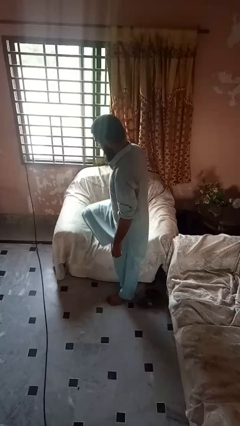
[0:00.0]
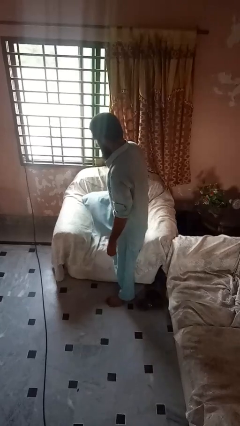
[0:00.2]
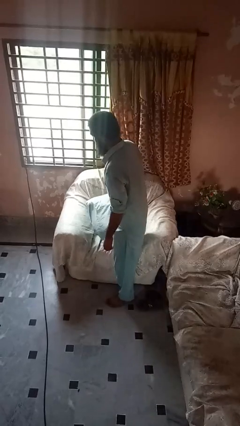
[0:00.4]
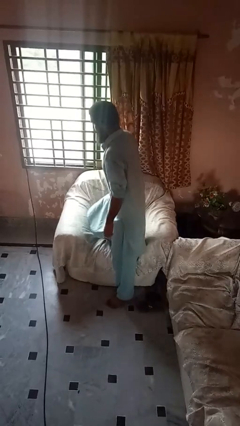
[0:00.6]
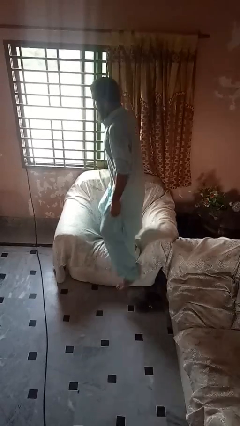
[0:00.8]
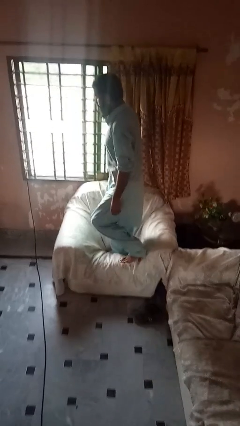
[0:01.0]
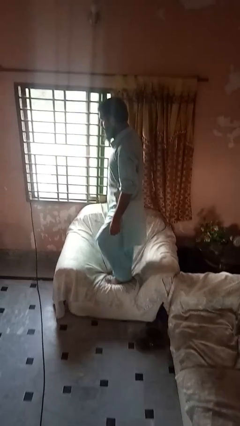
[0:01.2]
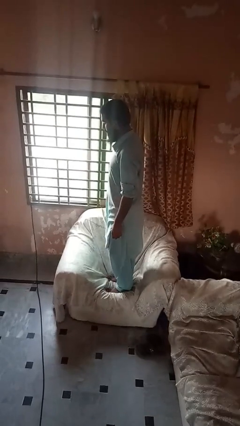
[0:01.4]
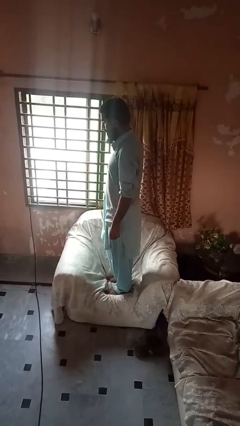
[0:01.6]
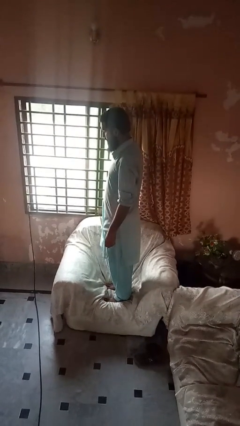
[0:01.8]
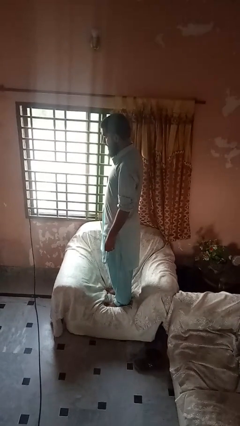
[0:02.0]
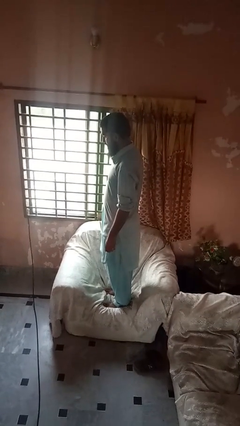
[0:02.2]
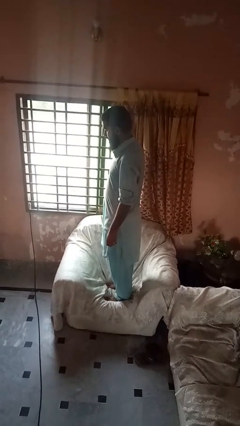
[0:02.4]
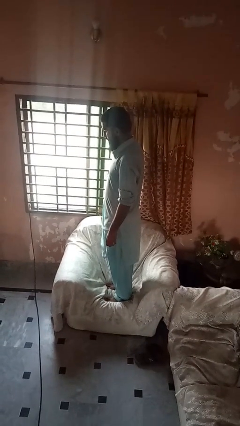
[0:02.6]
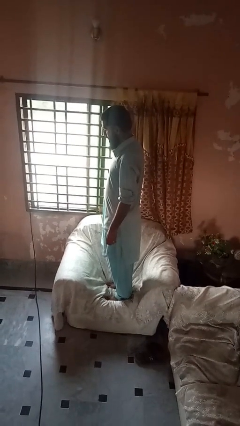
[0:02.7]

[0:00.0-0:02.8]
person climbs on couch

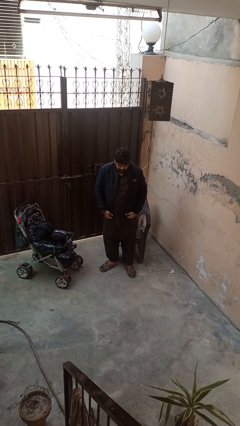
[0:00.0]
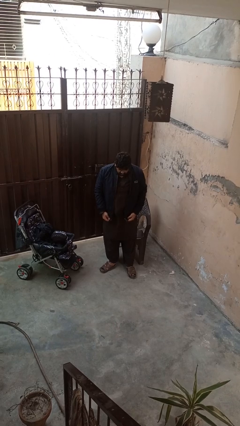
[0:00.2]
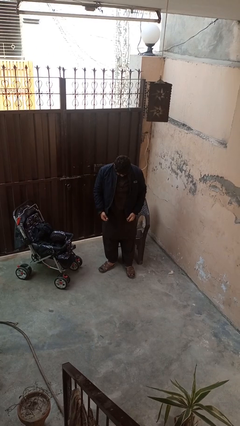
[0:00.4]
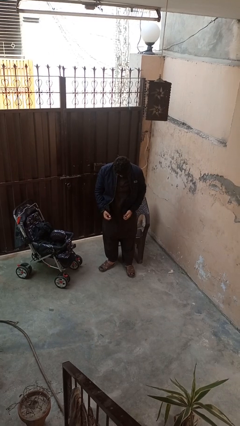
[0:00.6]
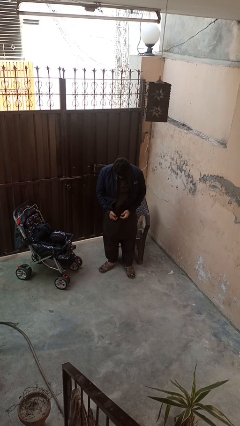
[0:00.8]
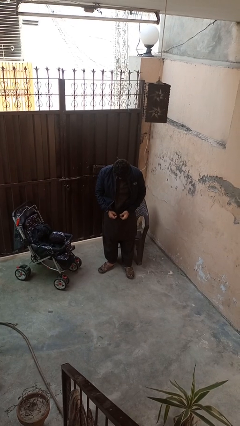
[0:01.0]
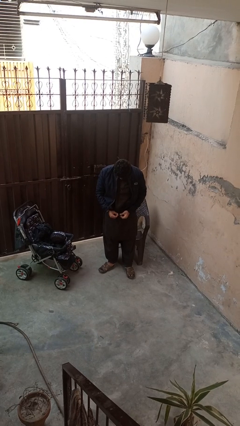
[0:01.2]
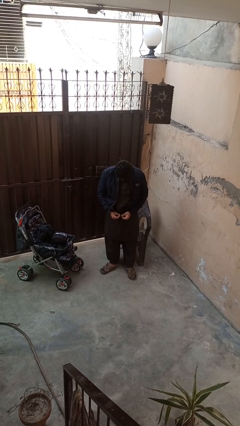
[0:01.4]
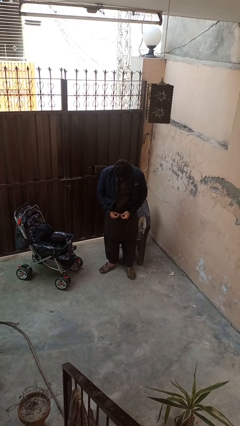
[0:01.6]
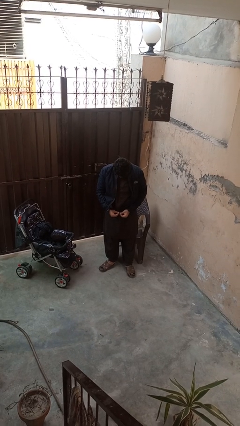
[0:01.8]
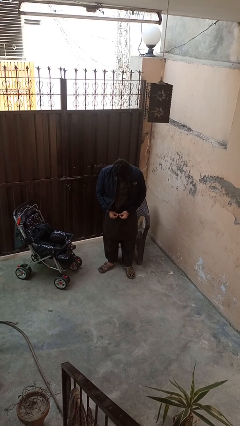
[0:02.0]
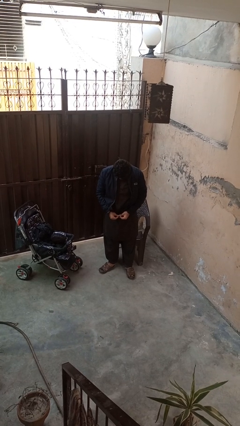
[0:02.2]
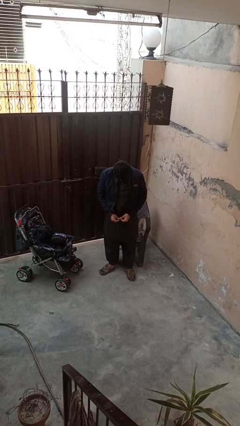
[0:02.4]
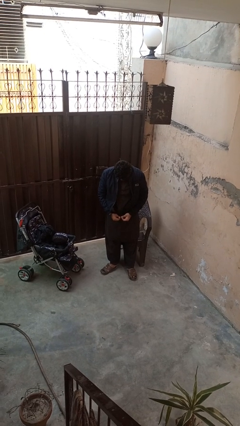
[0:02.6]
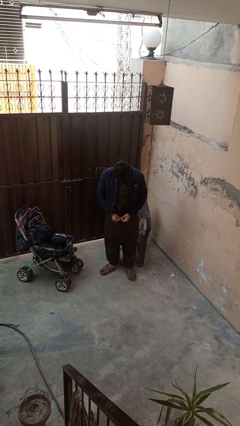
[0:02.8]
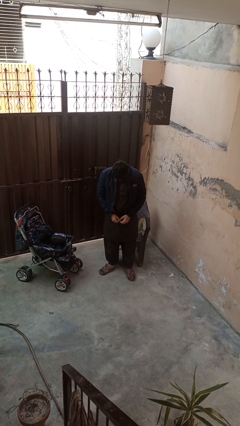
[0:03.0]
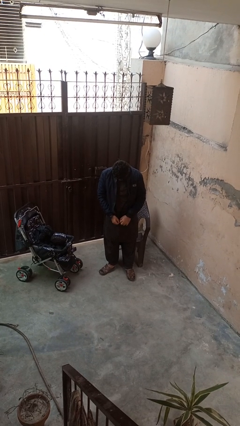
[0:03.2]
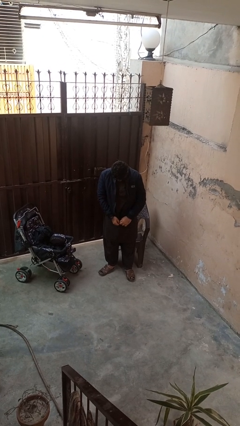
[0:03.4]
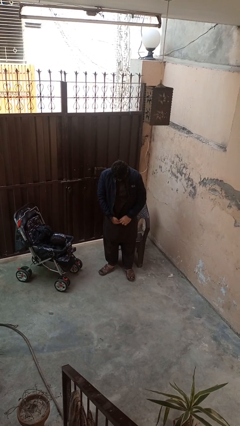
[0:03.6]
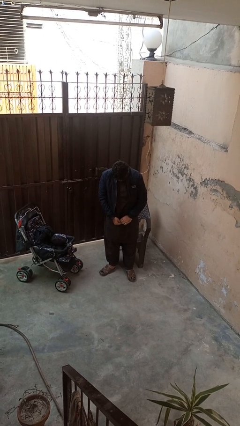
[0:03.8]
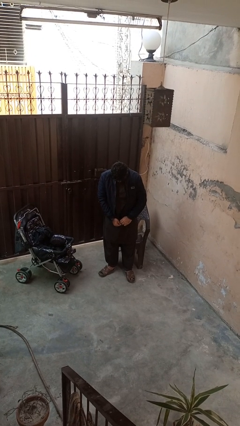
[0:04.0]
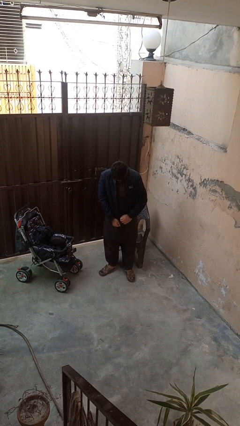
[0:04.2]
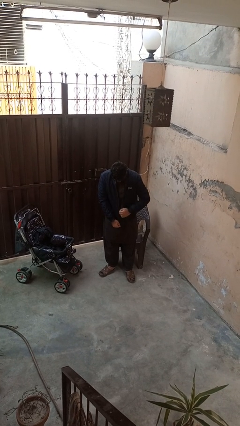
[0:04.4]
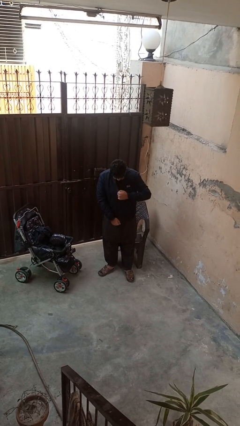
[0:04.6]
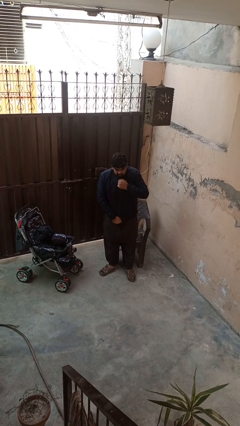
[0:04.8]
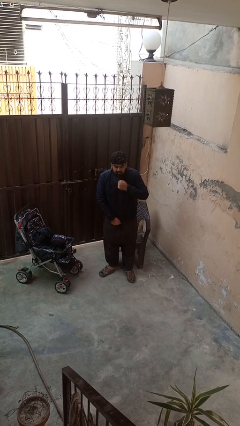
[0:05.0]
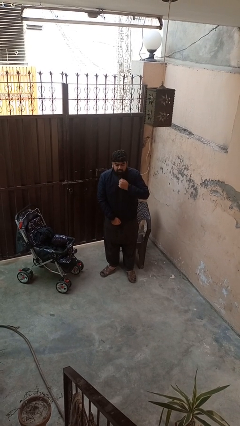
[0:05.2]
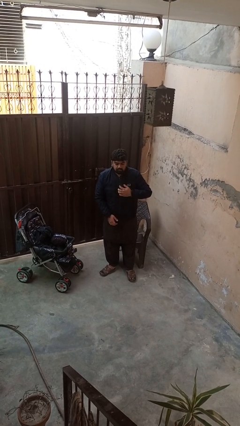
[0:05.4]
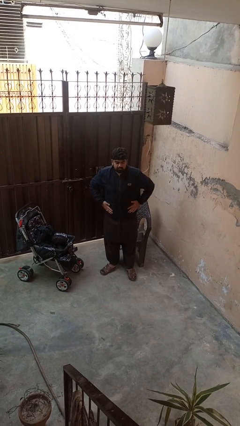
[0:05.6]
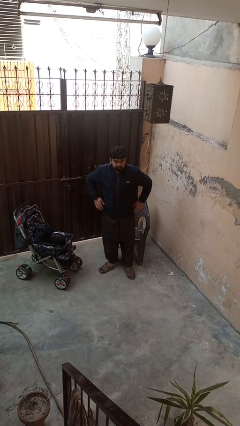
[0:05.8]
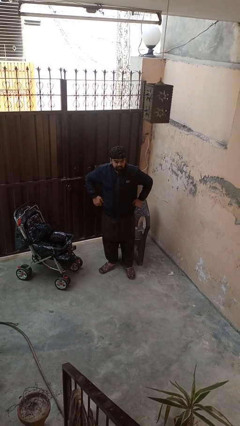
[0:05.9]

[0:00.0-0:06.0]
person zips up jacket

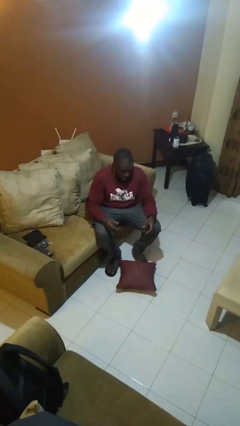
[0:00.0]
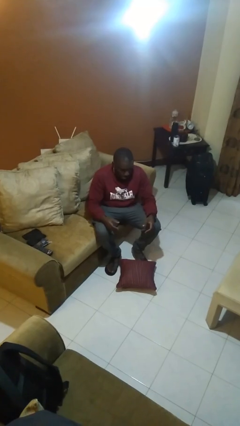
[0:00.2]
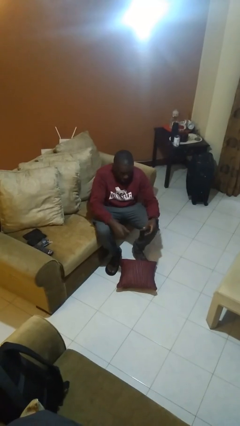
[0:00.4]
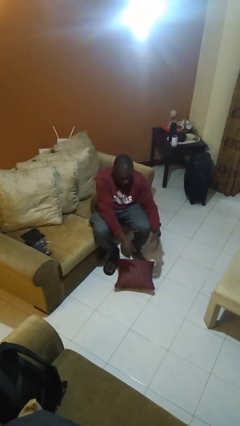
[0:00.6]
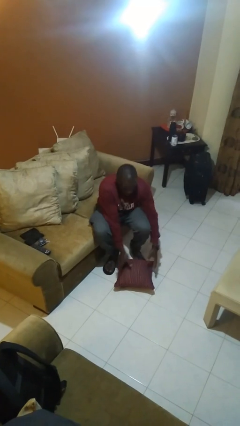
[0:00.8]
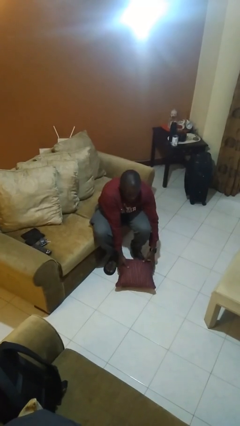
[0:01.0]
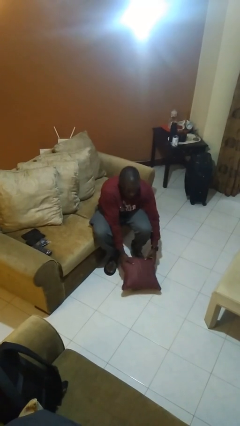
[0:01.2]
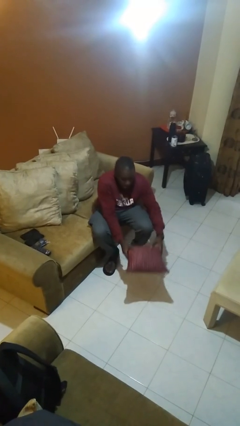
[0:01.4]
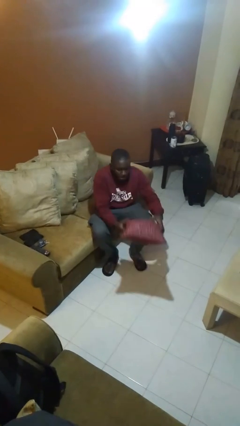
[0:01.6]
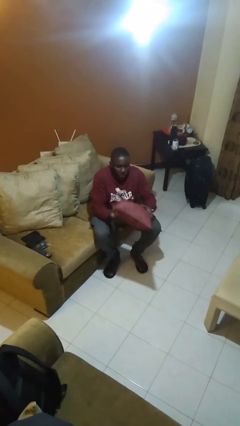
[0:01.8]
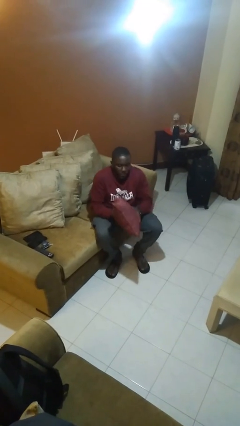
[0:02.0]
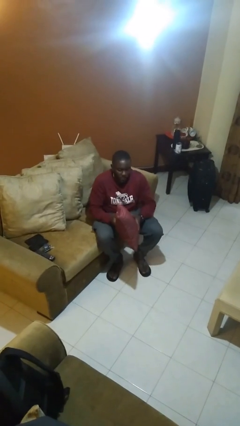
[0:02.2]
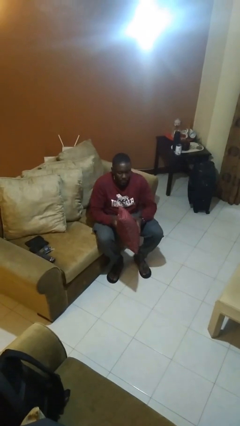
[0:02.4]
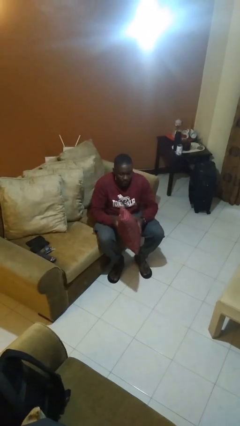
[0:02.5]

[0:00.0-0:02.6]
person picks up object from floor

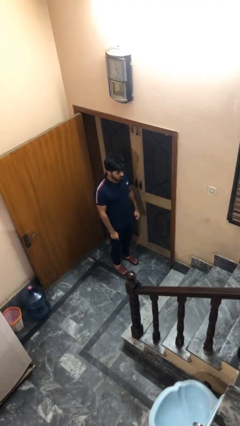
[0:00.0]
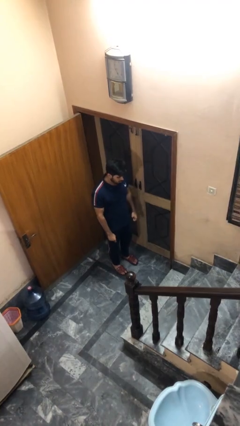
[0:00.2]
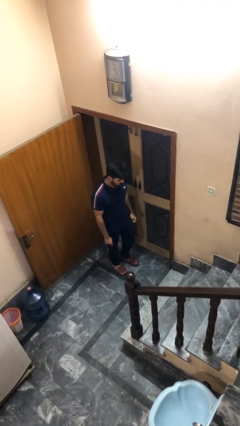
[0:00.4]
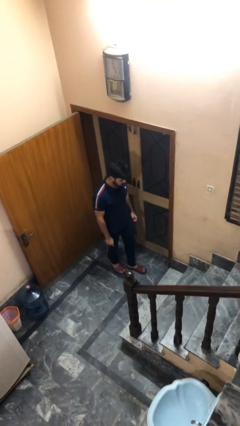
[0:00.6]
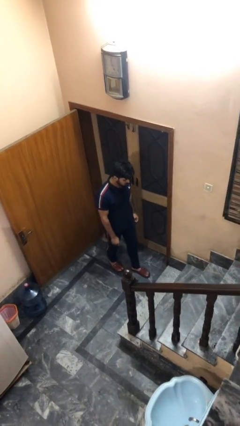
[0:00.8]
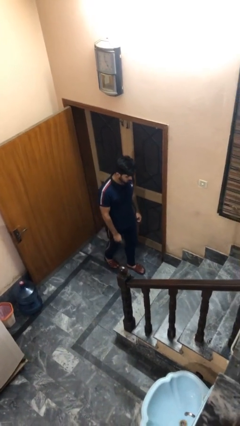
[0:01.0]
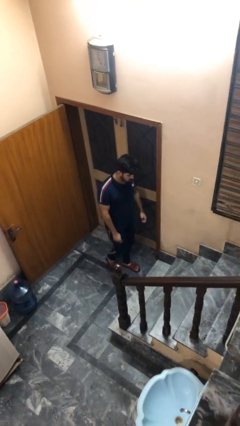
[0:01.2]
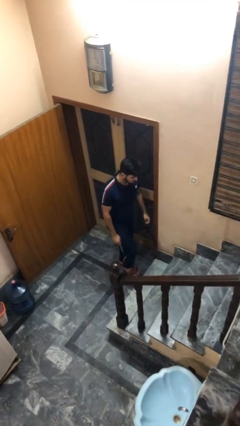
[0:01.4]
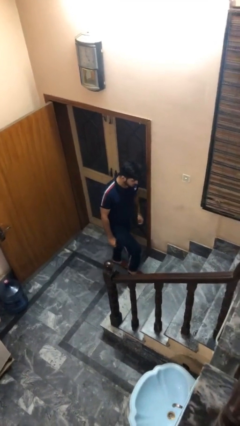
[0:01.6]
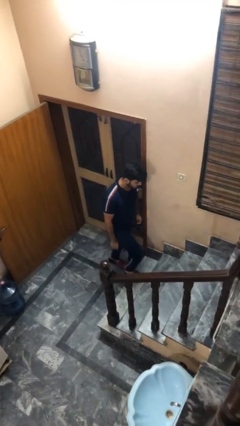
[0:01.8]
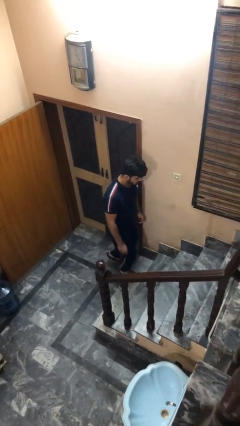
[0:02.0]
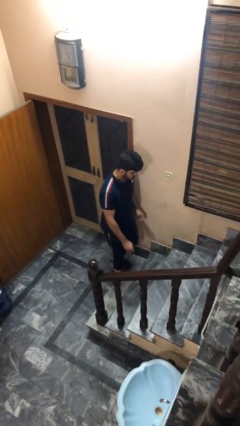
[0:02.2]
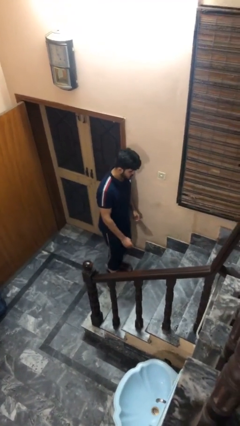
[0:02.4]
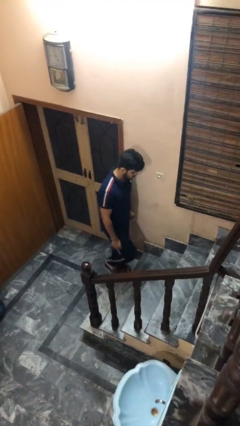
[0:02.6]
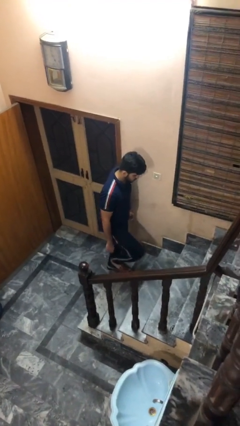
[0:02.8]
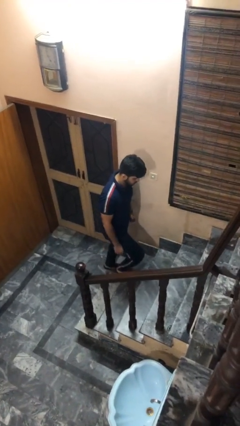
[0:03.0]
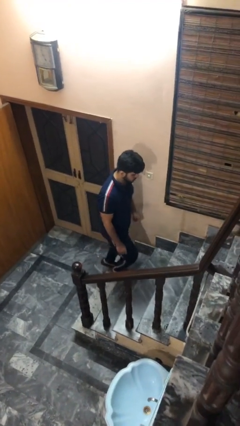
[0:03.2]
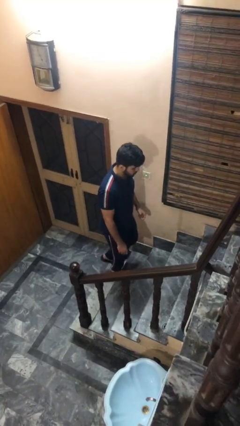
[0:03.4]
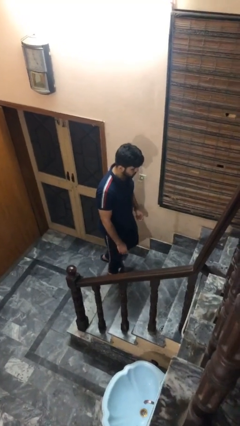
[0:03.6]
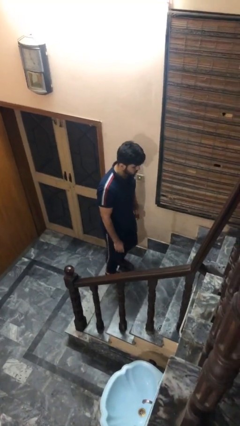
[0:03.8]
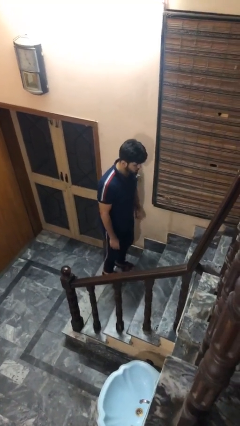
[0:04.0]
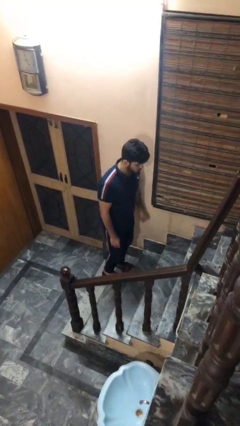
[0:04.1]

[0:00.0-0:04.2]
person climbs up stairs

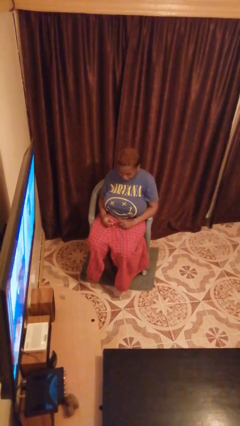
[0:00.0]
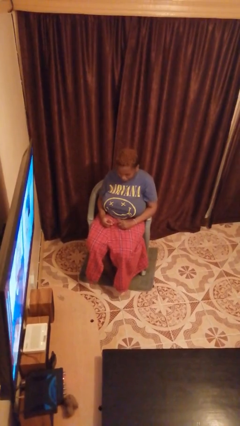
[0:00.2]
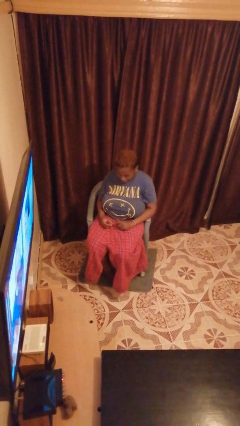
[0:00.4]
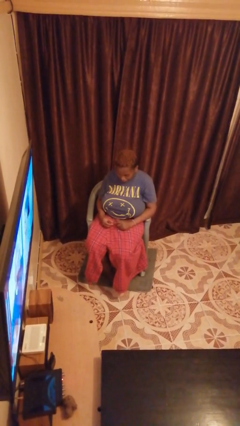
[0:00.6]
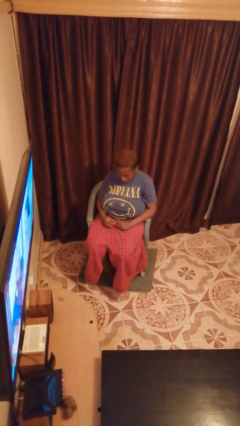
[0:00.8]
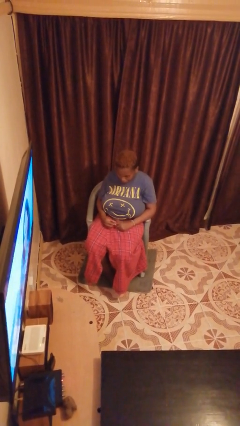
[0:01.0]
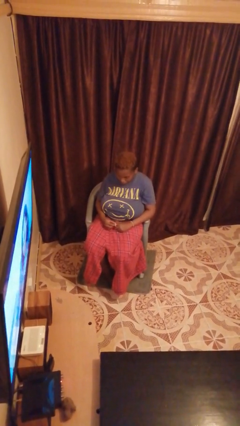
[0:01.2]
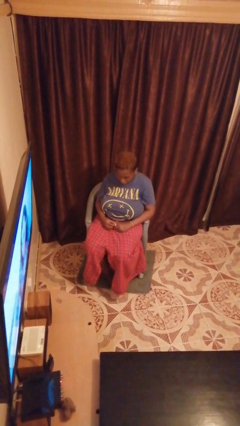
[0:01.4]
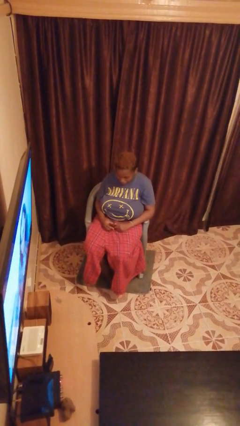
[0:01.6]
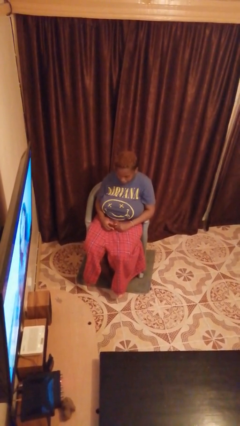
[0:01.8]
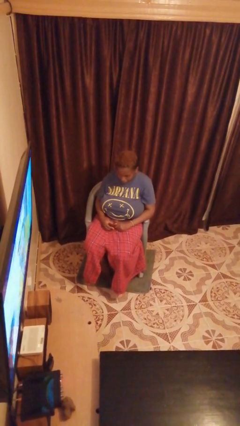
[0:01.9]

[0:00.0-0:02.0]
person puts on ring
